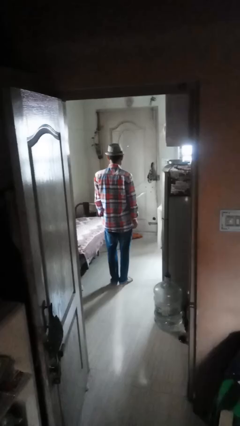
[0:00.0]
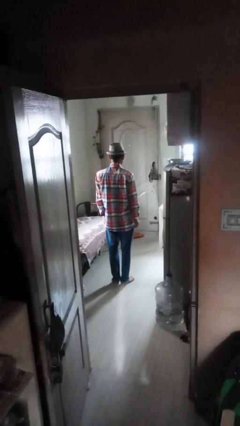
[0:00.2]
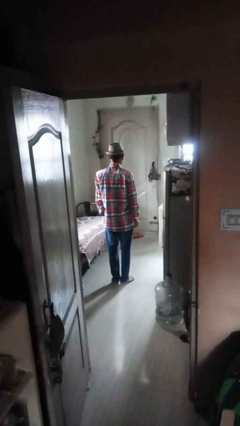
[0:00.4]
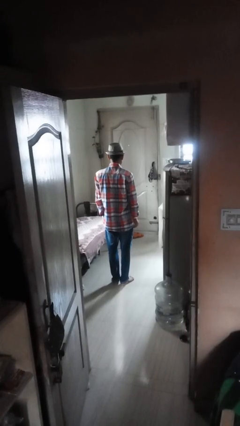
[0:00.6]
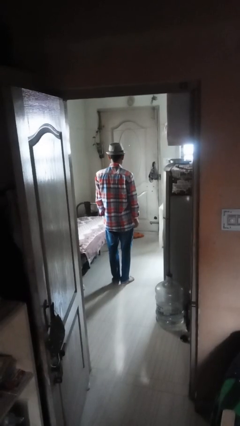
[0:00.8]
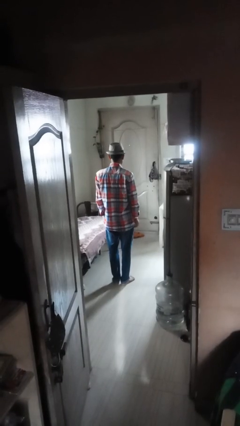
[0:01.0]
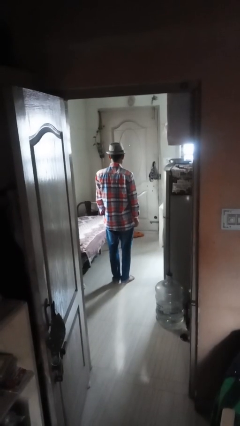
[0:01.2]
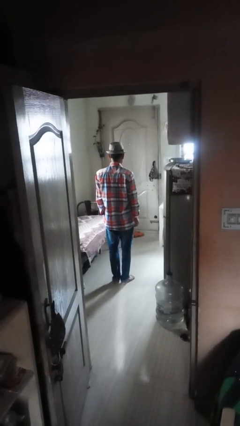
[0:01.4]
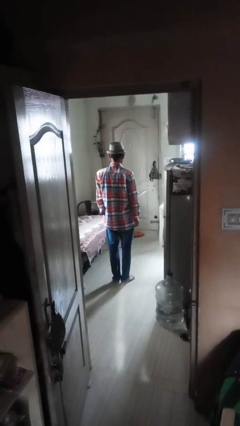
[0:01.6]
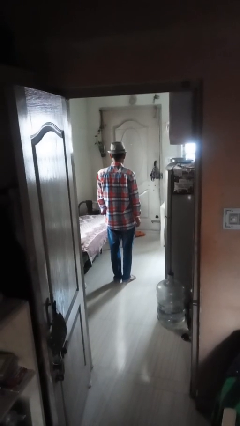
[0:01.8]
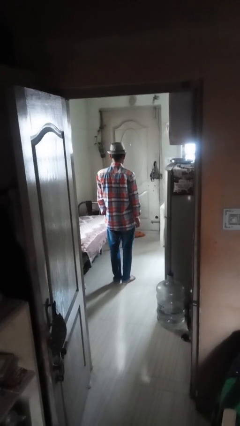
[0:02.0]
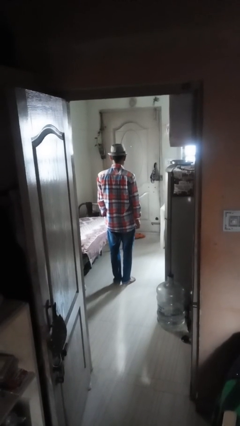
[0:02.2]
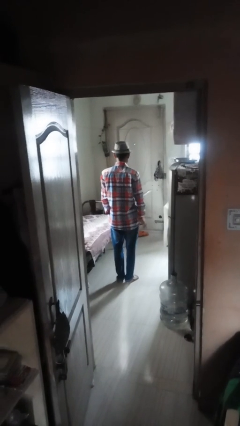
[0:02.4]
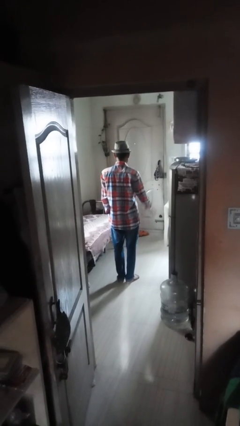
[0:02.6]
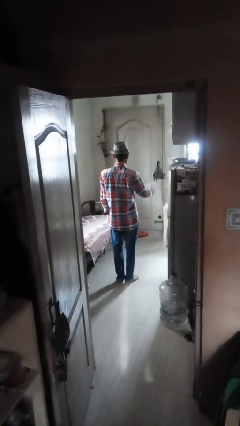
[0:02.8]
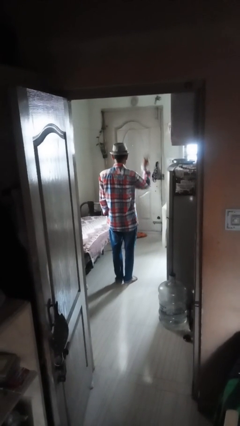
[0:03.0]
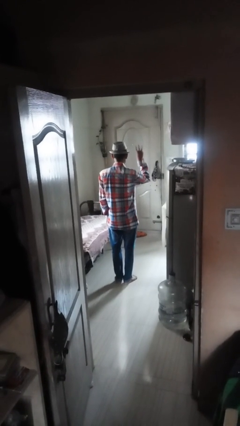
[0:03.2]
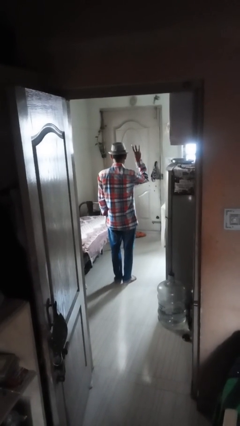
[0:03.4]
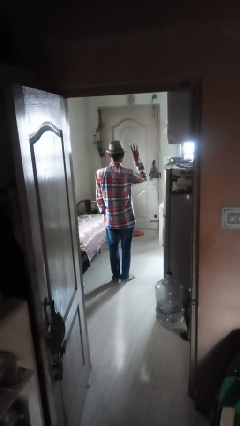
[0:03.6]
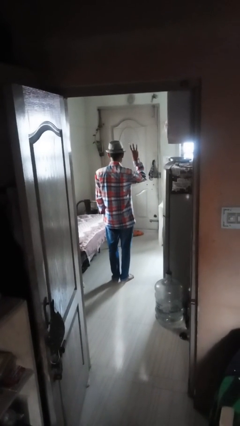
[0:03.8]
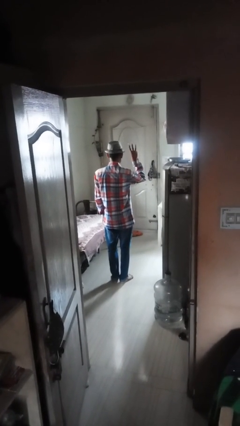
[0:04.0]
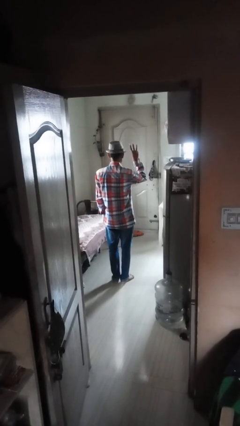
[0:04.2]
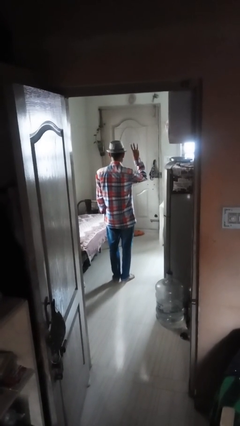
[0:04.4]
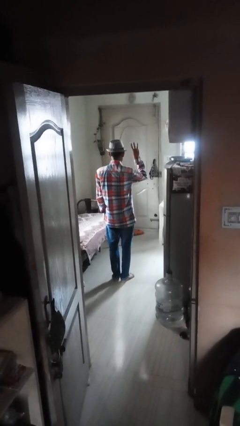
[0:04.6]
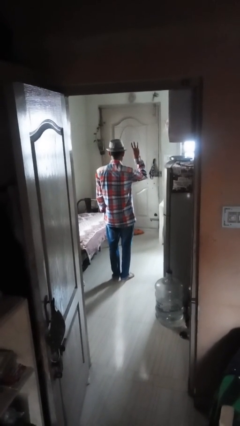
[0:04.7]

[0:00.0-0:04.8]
person gestures number three

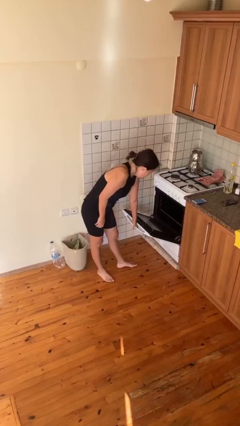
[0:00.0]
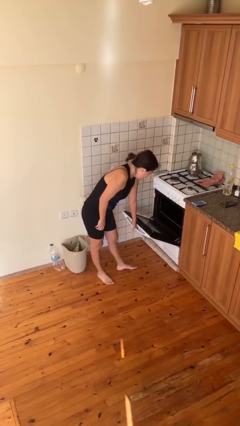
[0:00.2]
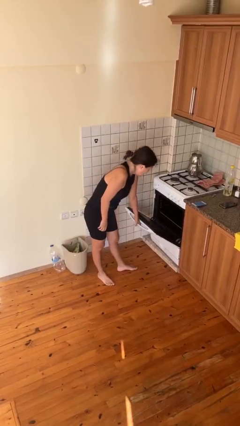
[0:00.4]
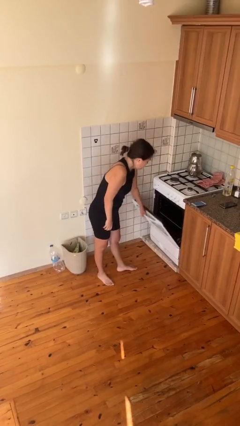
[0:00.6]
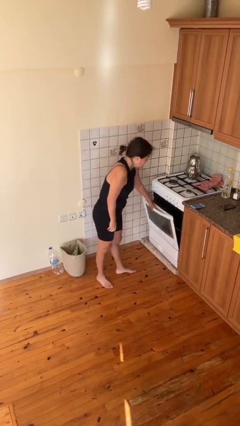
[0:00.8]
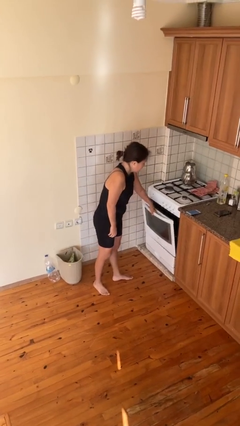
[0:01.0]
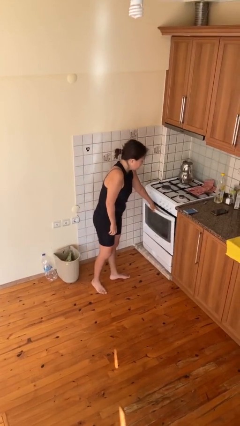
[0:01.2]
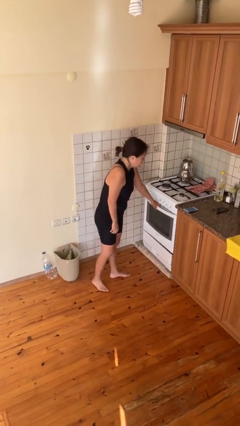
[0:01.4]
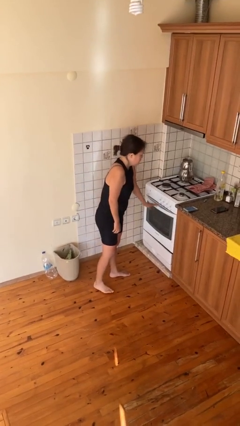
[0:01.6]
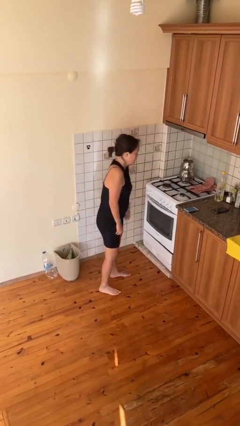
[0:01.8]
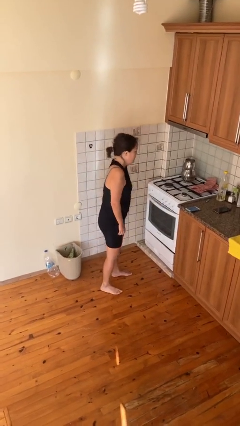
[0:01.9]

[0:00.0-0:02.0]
person closes oven door

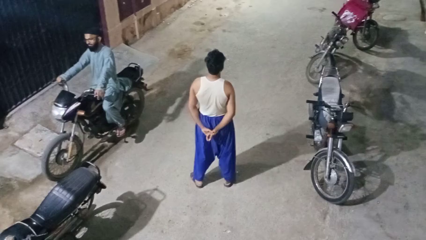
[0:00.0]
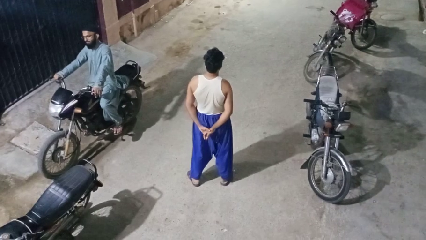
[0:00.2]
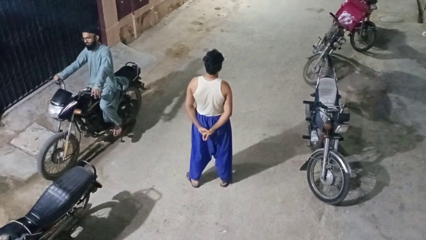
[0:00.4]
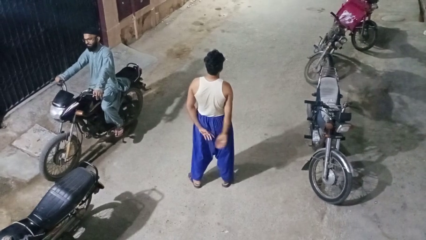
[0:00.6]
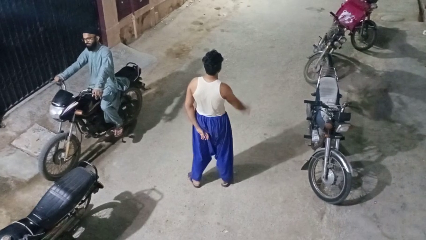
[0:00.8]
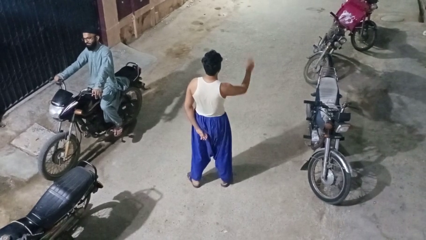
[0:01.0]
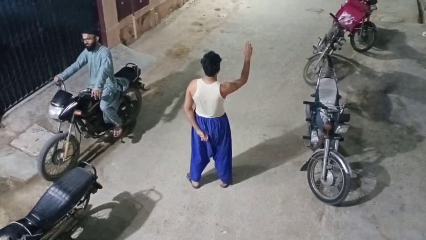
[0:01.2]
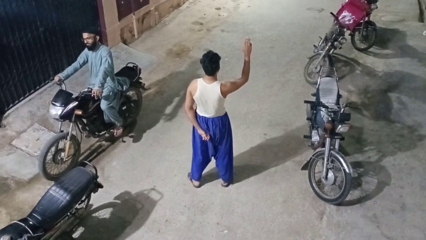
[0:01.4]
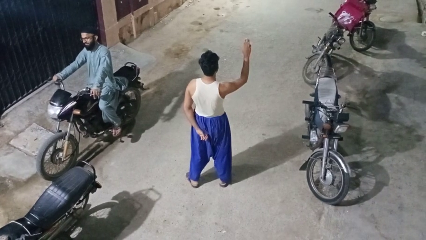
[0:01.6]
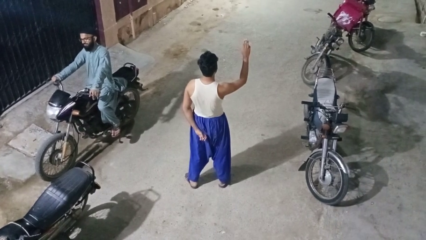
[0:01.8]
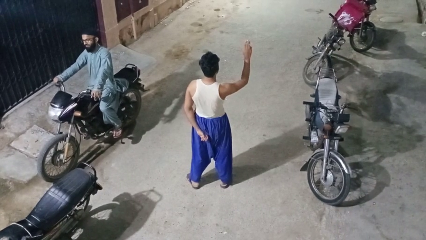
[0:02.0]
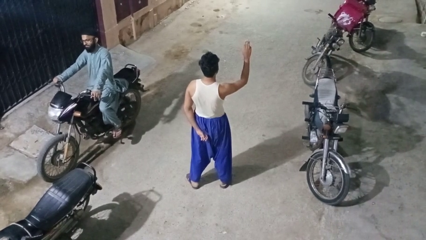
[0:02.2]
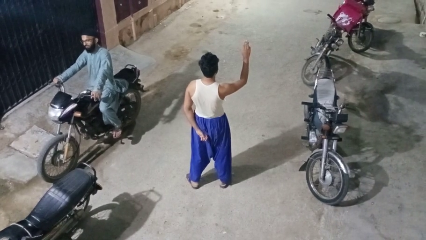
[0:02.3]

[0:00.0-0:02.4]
person points at person

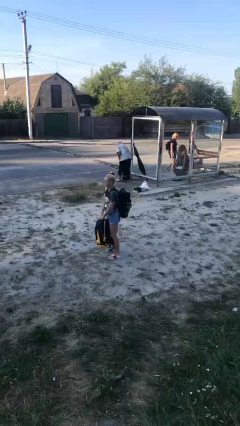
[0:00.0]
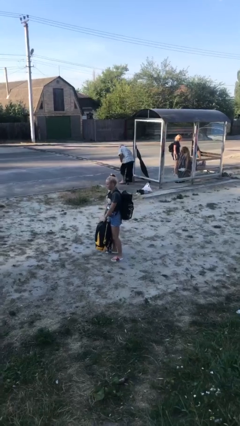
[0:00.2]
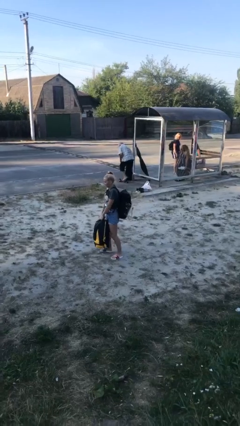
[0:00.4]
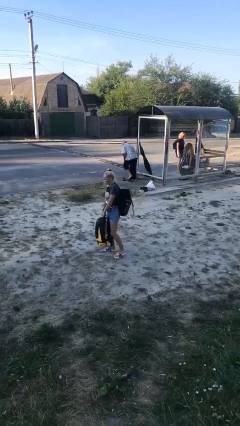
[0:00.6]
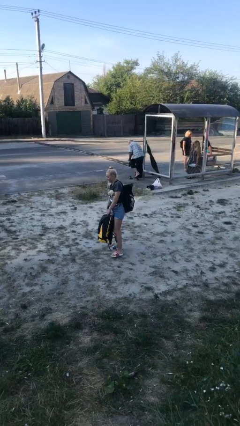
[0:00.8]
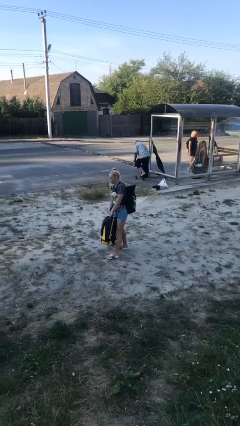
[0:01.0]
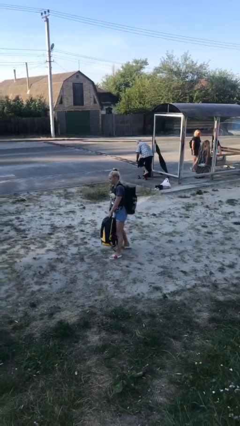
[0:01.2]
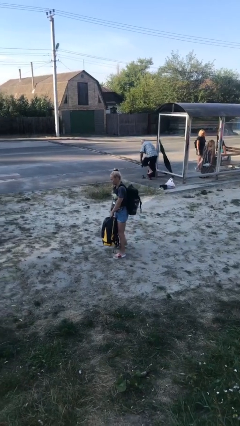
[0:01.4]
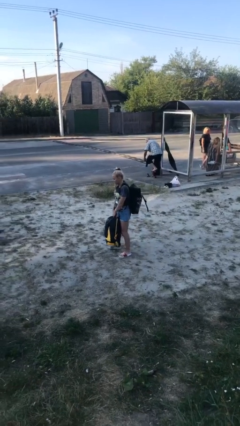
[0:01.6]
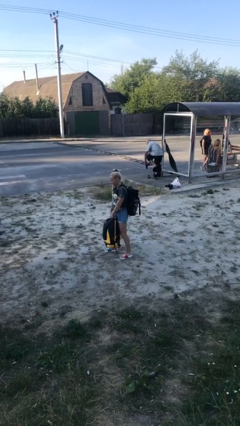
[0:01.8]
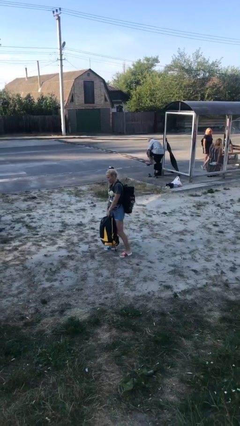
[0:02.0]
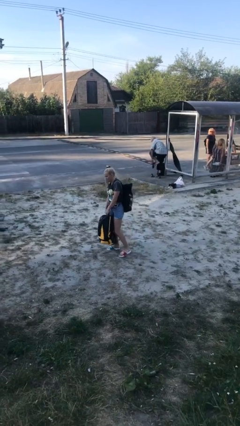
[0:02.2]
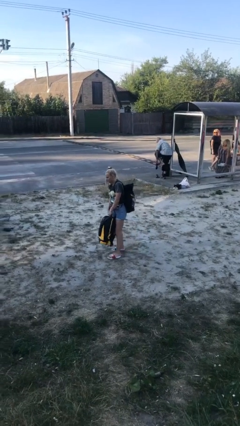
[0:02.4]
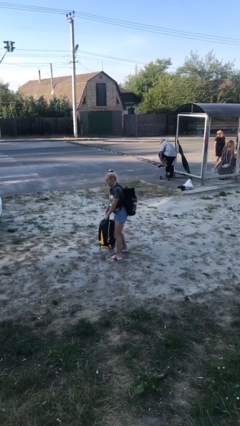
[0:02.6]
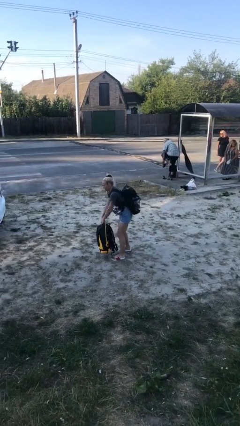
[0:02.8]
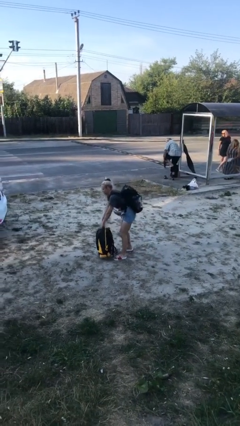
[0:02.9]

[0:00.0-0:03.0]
person carries heavy object

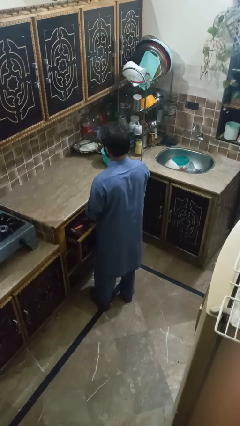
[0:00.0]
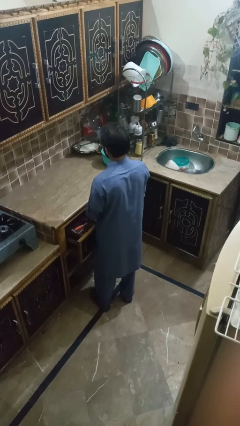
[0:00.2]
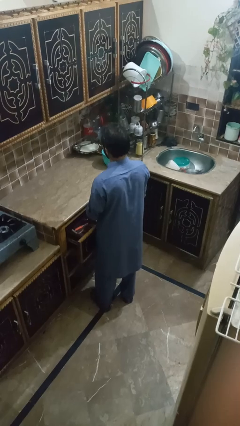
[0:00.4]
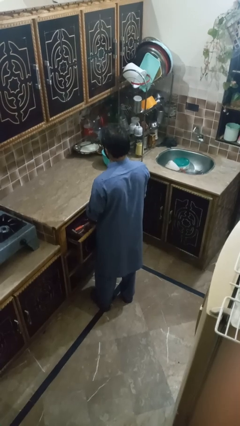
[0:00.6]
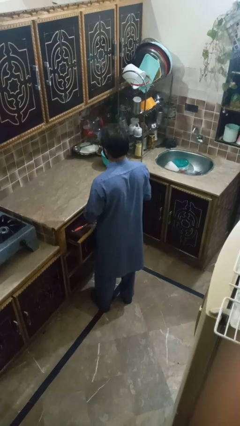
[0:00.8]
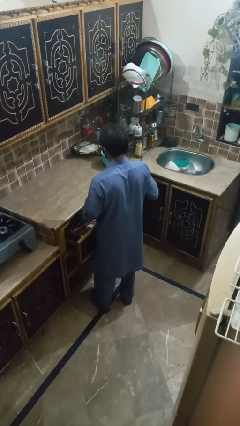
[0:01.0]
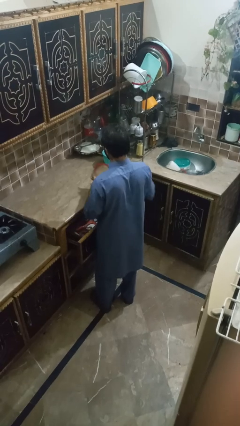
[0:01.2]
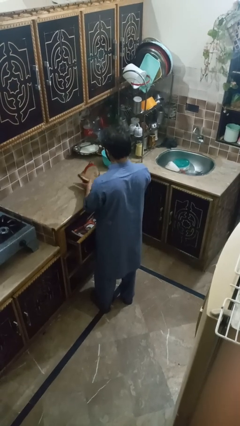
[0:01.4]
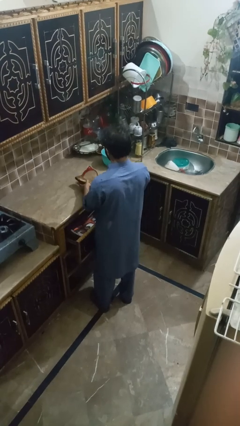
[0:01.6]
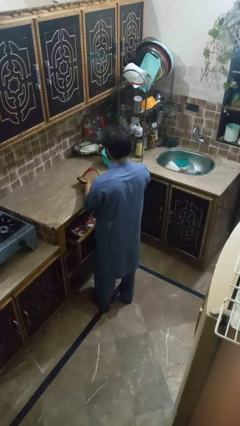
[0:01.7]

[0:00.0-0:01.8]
person takes object from kitchen drawer

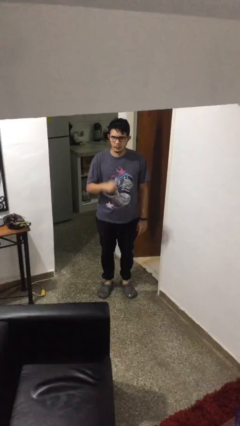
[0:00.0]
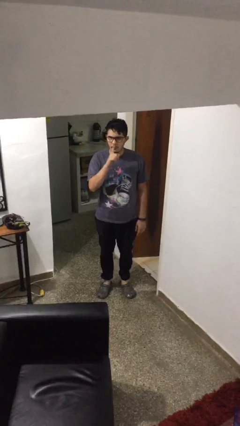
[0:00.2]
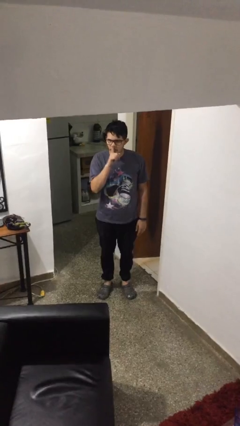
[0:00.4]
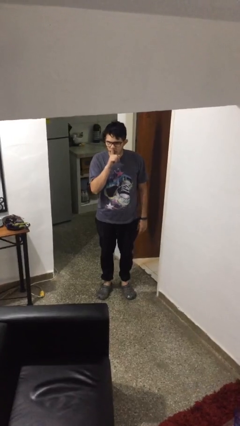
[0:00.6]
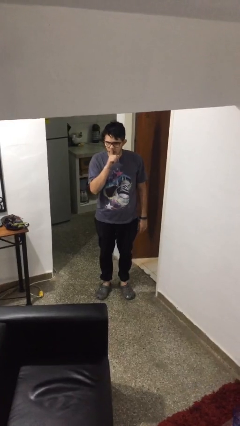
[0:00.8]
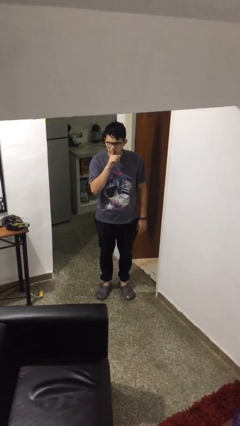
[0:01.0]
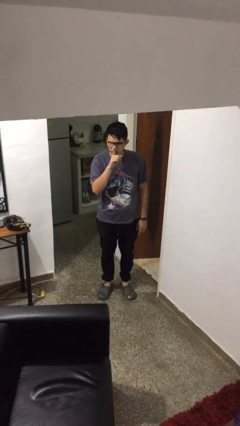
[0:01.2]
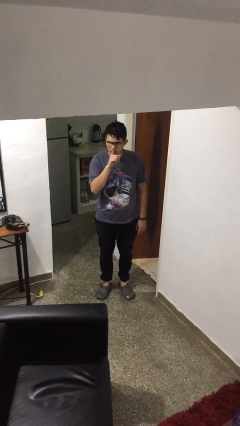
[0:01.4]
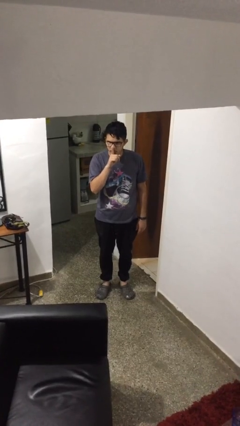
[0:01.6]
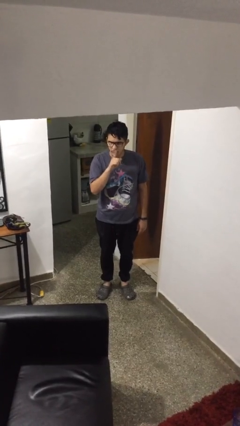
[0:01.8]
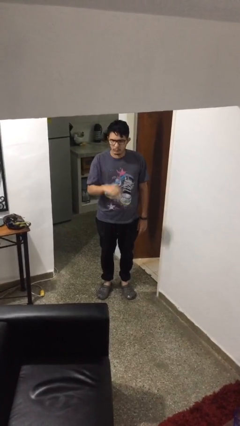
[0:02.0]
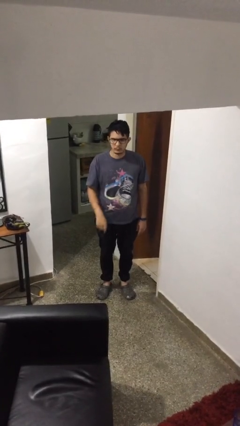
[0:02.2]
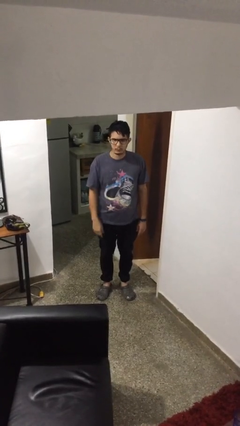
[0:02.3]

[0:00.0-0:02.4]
person gestures be quiet

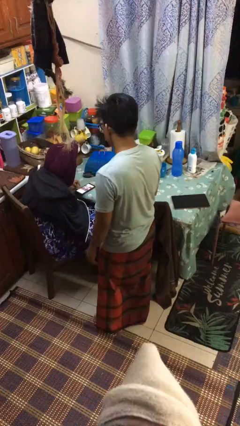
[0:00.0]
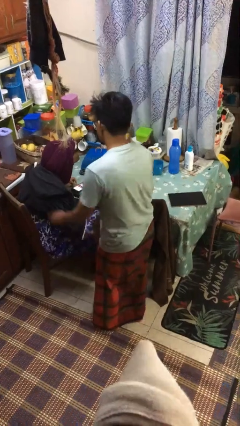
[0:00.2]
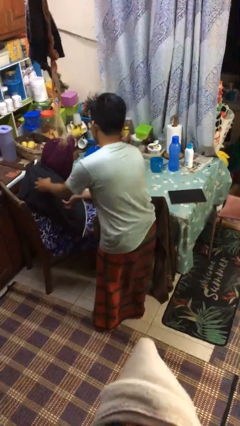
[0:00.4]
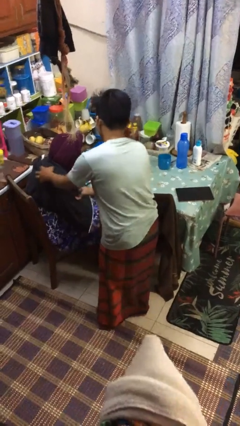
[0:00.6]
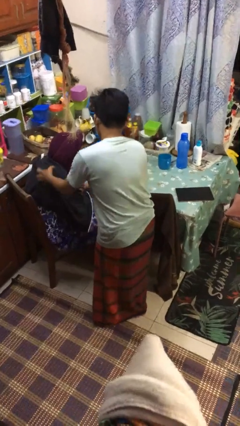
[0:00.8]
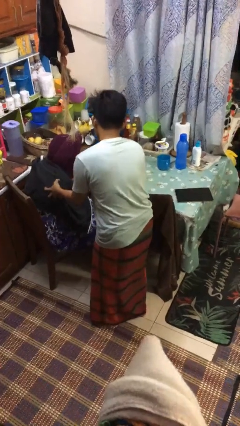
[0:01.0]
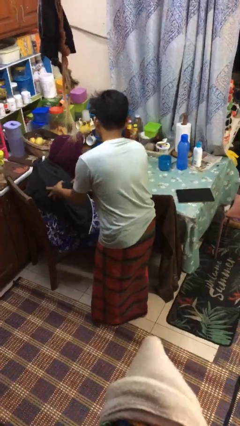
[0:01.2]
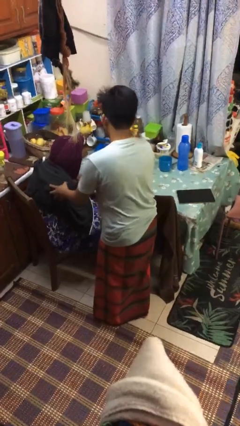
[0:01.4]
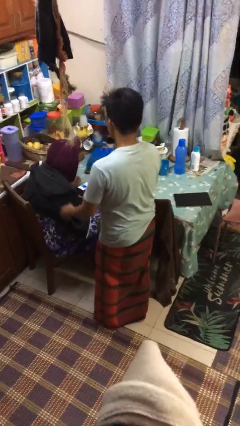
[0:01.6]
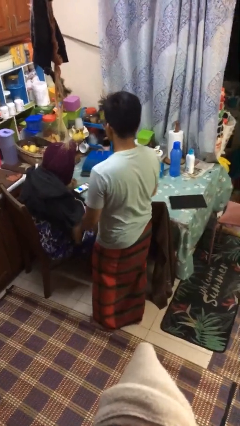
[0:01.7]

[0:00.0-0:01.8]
person tickles person
